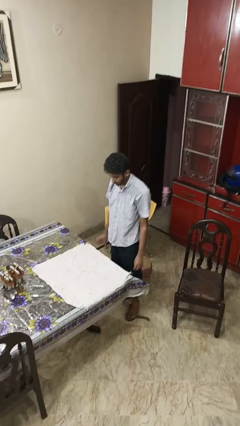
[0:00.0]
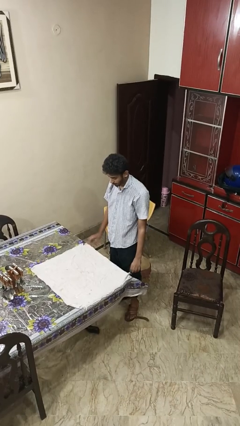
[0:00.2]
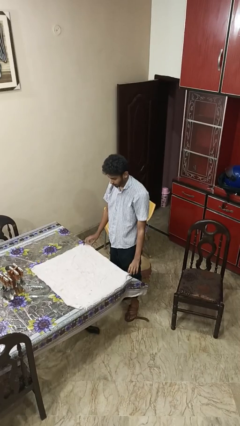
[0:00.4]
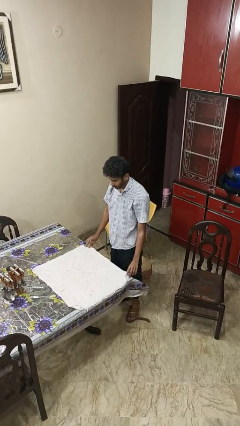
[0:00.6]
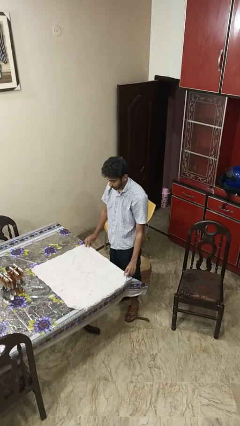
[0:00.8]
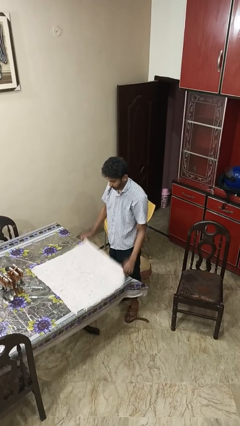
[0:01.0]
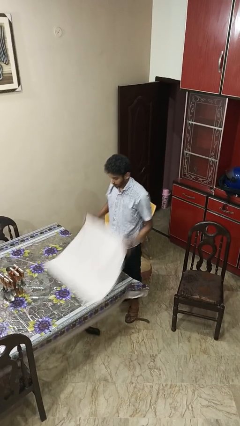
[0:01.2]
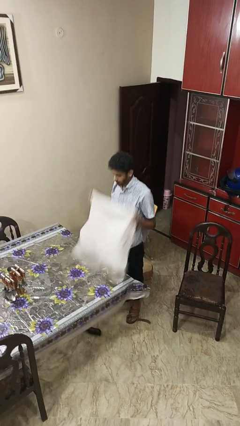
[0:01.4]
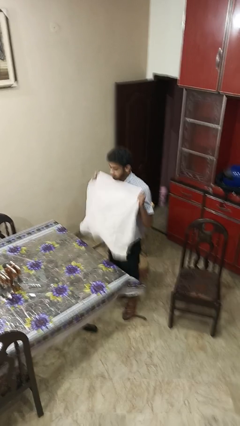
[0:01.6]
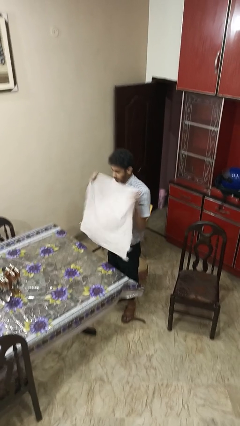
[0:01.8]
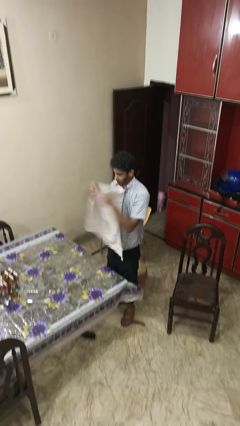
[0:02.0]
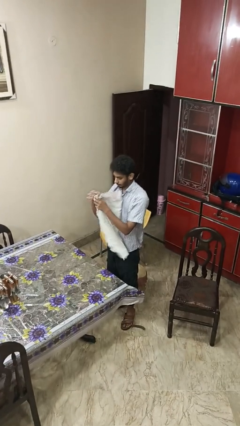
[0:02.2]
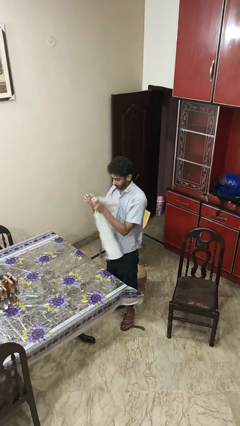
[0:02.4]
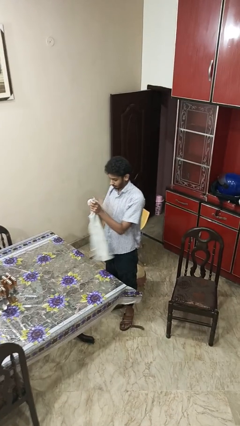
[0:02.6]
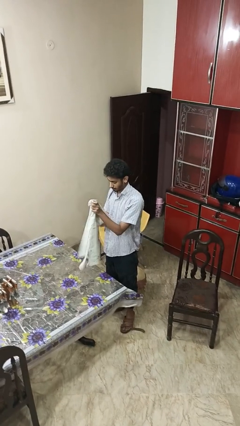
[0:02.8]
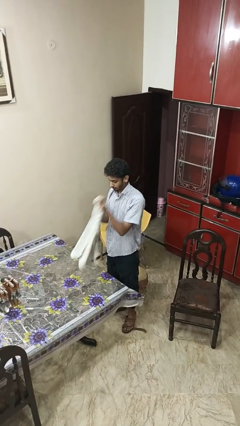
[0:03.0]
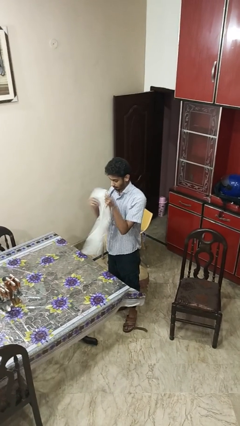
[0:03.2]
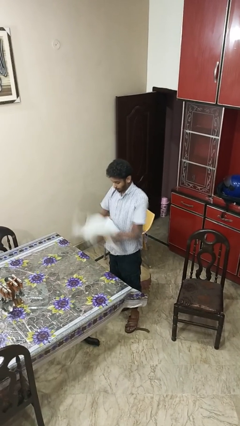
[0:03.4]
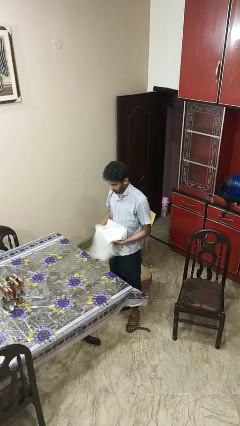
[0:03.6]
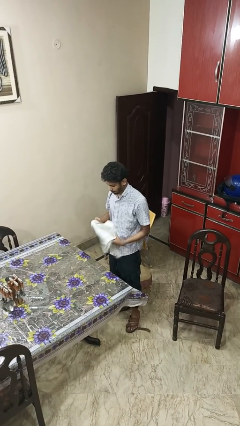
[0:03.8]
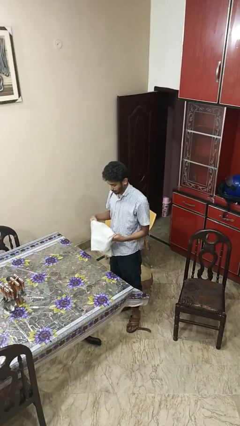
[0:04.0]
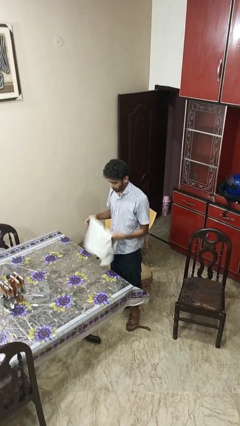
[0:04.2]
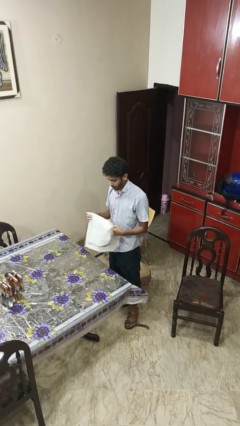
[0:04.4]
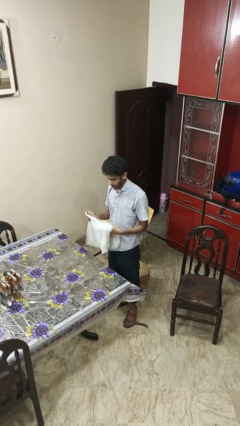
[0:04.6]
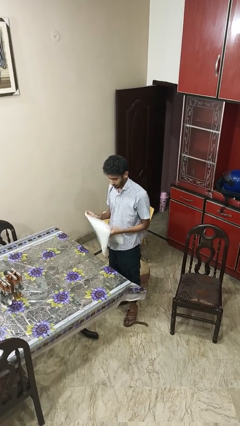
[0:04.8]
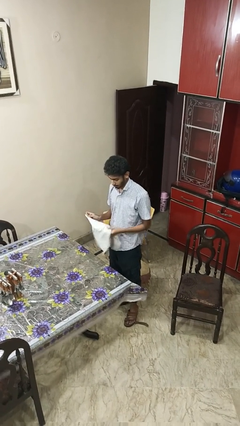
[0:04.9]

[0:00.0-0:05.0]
person folds tablecloth

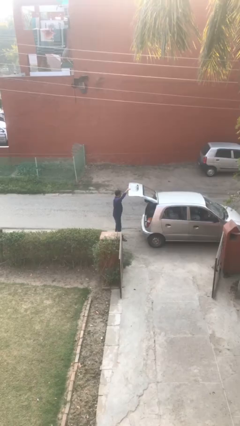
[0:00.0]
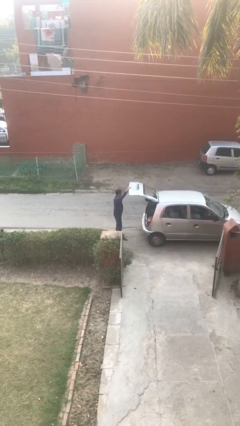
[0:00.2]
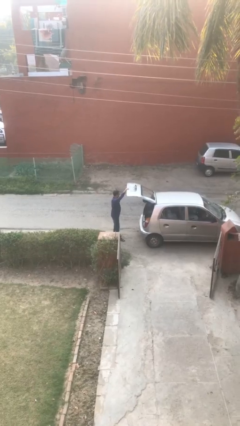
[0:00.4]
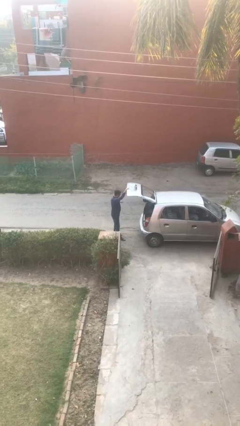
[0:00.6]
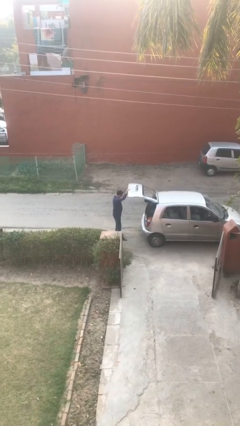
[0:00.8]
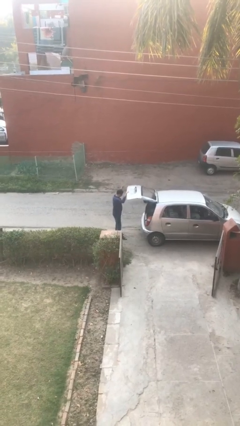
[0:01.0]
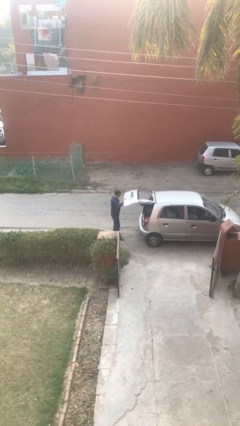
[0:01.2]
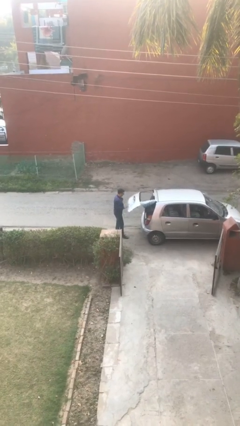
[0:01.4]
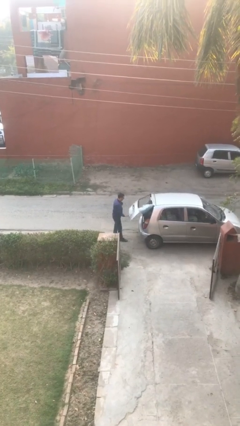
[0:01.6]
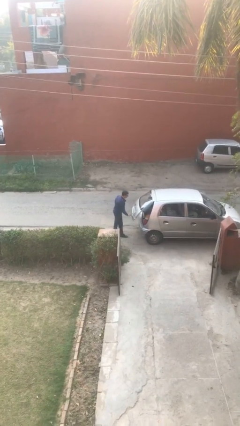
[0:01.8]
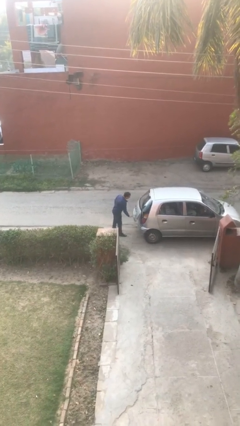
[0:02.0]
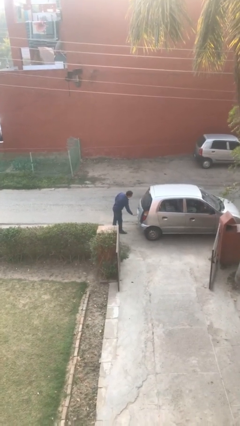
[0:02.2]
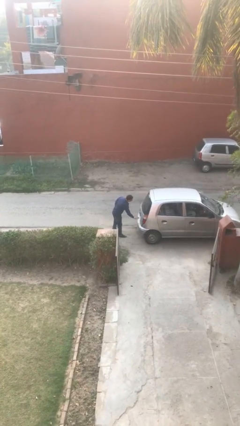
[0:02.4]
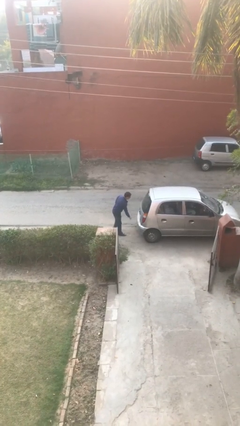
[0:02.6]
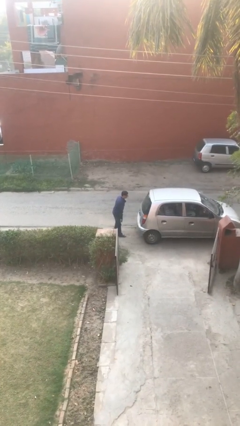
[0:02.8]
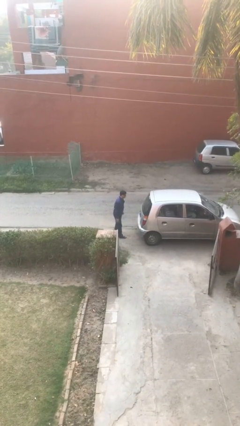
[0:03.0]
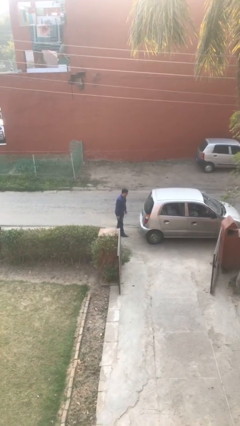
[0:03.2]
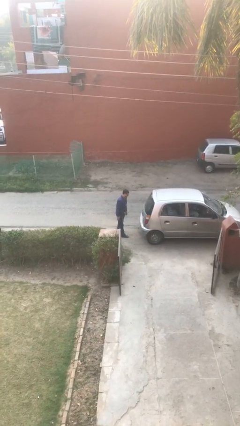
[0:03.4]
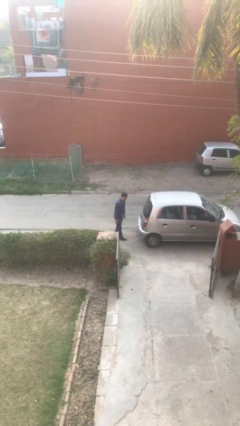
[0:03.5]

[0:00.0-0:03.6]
person closes car trunk

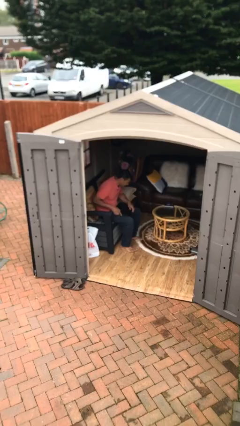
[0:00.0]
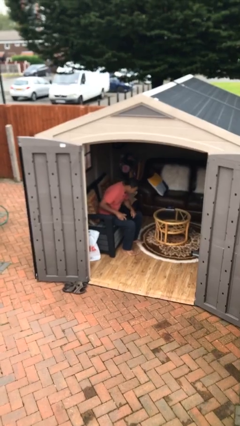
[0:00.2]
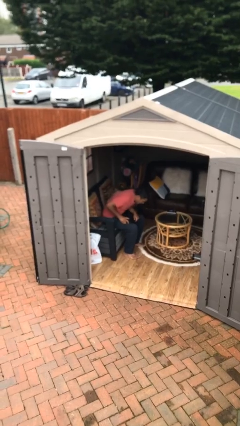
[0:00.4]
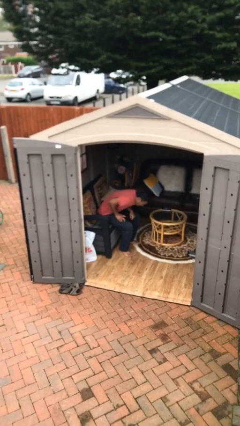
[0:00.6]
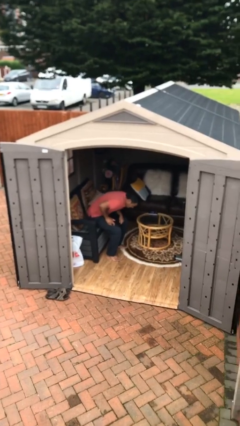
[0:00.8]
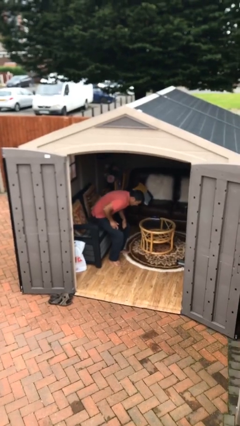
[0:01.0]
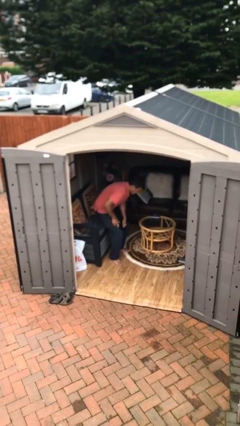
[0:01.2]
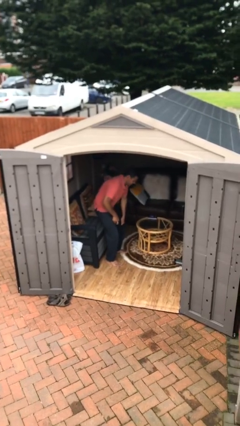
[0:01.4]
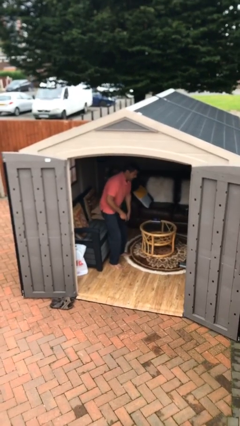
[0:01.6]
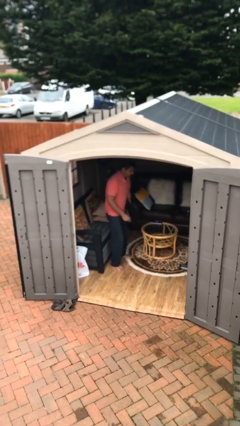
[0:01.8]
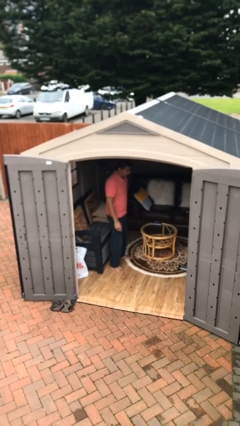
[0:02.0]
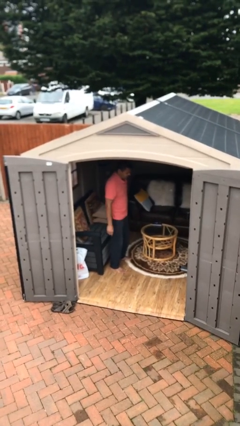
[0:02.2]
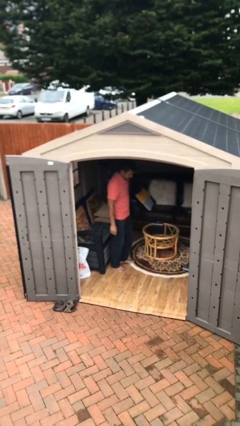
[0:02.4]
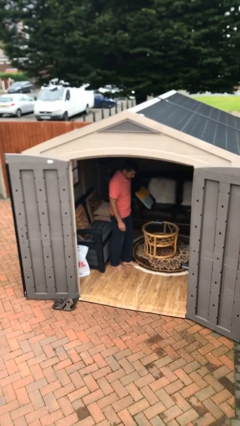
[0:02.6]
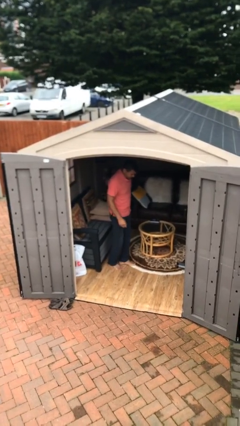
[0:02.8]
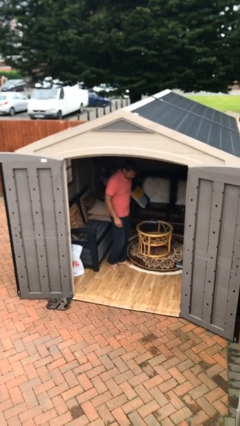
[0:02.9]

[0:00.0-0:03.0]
person stands up

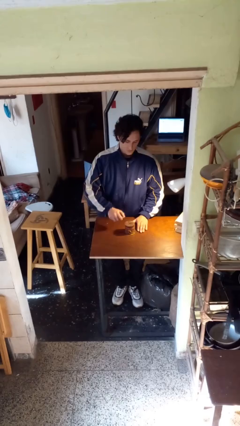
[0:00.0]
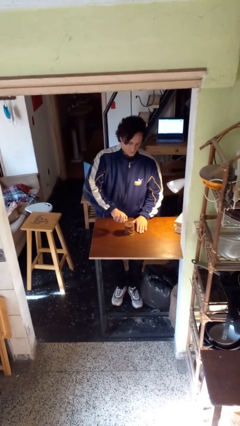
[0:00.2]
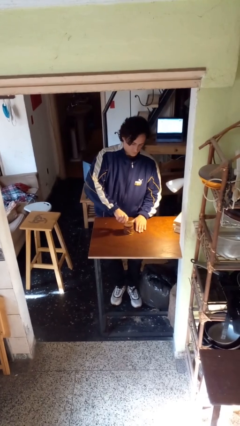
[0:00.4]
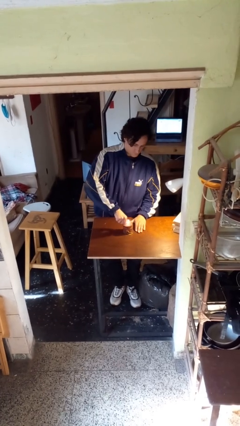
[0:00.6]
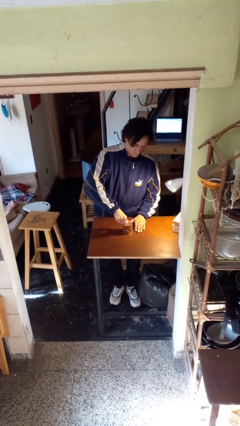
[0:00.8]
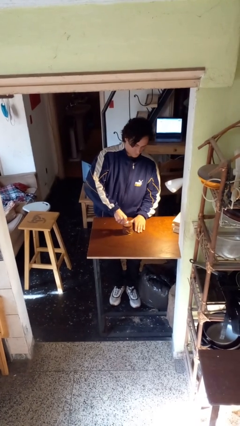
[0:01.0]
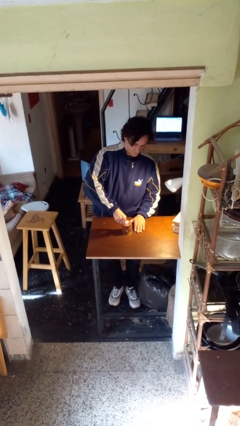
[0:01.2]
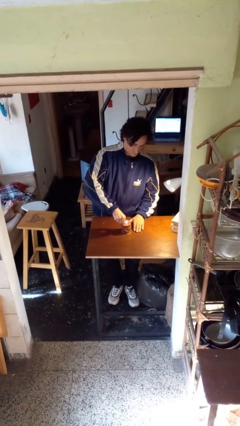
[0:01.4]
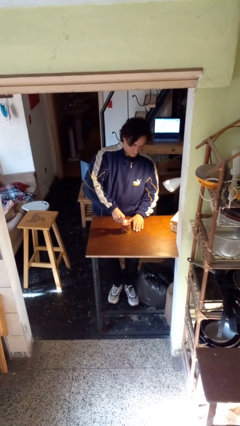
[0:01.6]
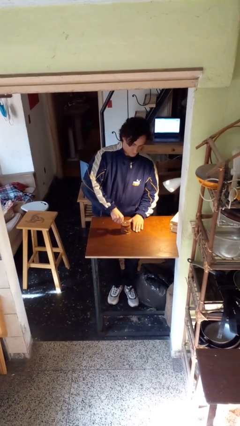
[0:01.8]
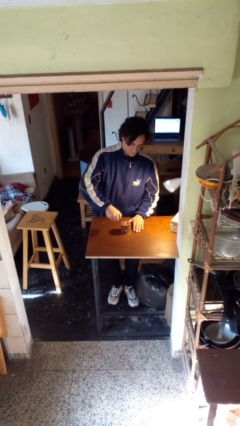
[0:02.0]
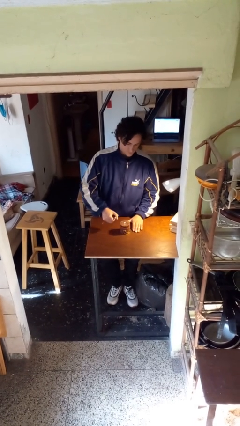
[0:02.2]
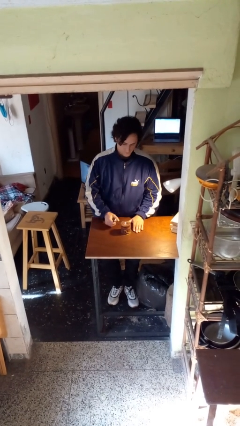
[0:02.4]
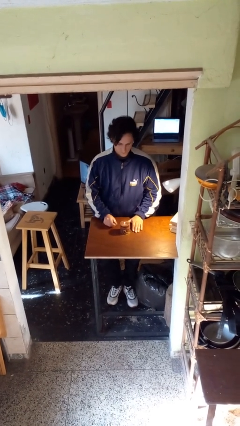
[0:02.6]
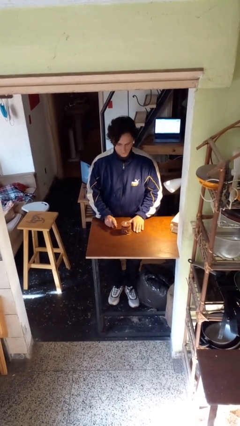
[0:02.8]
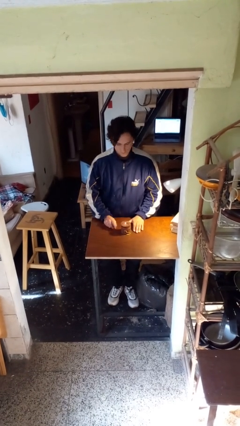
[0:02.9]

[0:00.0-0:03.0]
person lights candle

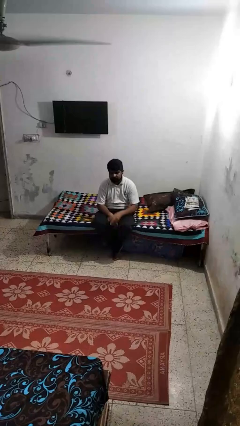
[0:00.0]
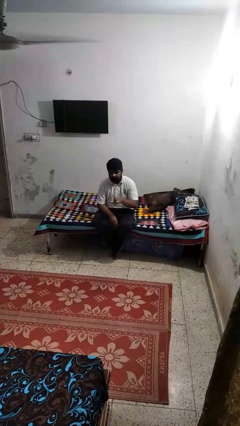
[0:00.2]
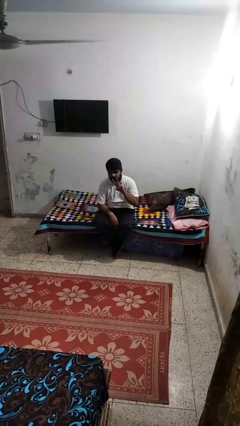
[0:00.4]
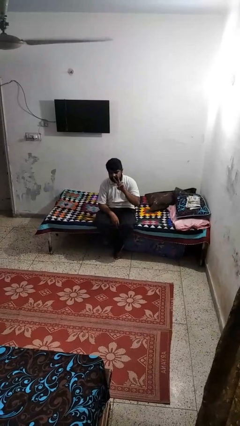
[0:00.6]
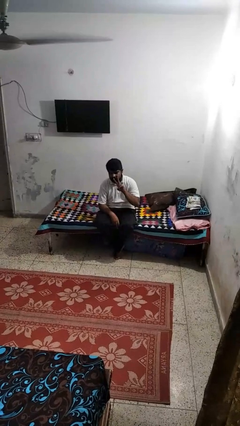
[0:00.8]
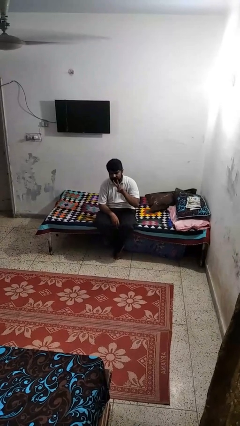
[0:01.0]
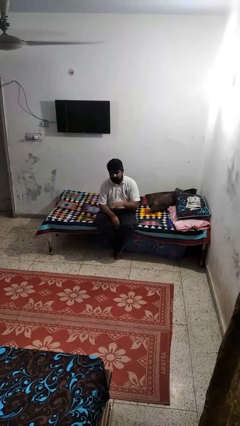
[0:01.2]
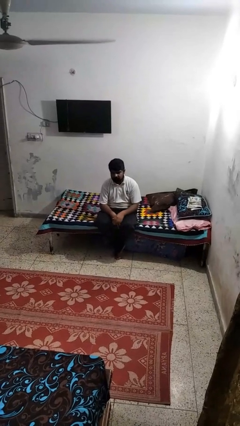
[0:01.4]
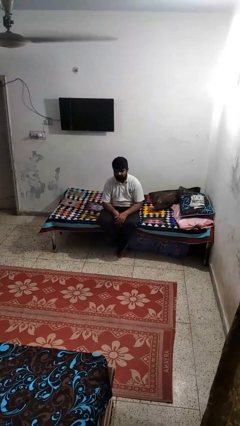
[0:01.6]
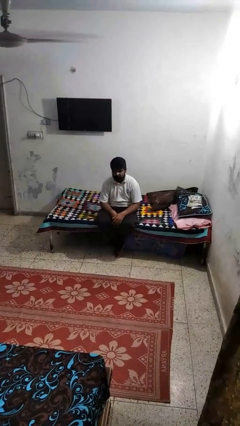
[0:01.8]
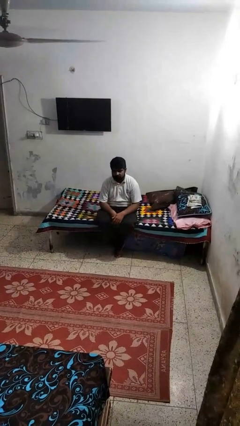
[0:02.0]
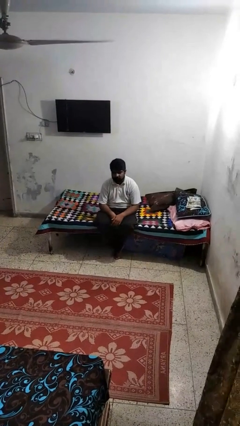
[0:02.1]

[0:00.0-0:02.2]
person gestures peace

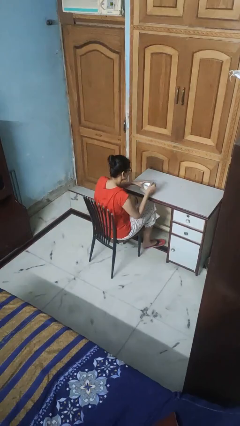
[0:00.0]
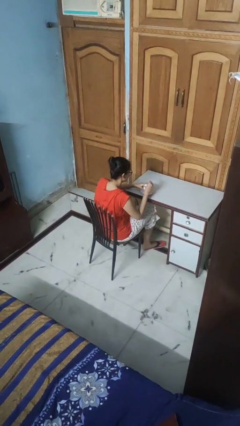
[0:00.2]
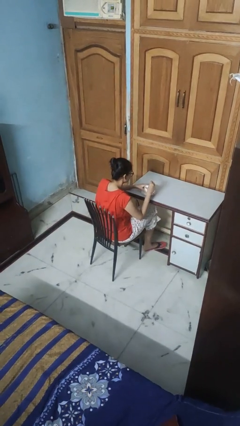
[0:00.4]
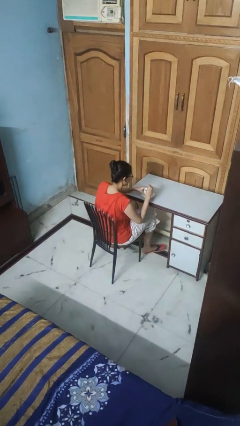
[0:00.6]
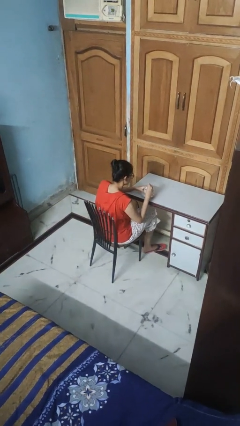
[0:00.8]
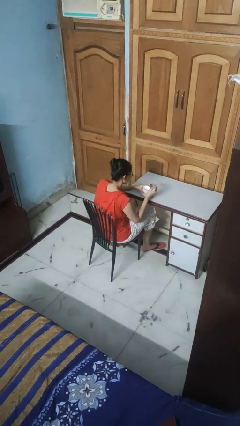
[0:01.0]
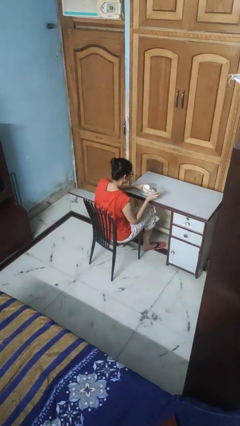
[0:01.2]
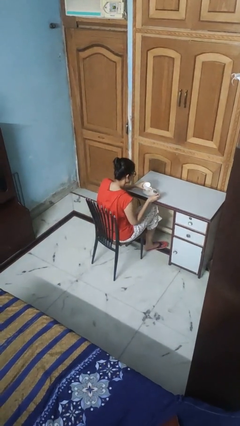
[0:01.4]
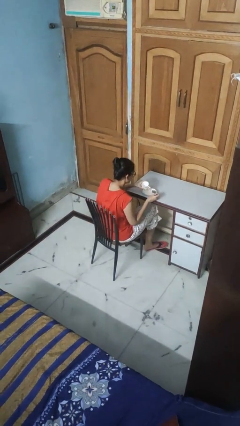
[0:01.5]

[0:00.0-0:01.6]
person stirs mug
